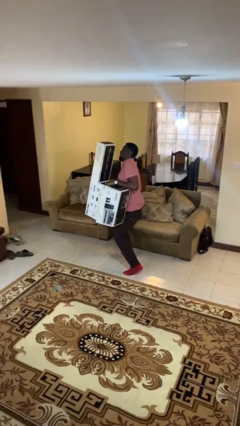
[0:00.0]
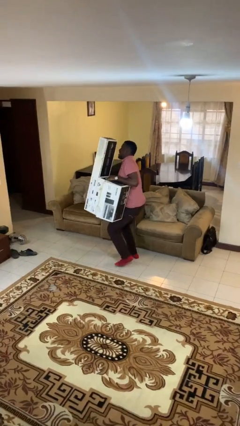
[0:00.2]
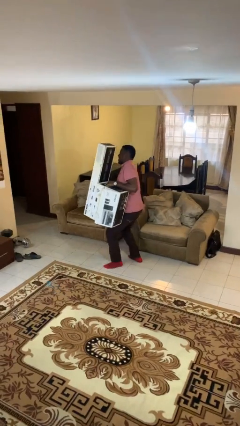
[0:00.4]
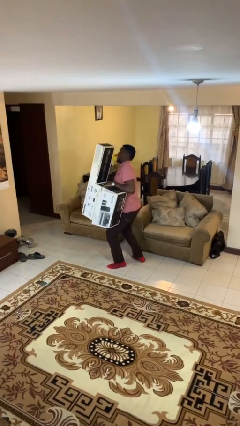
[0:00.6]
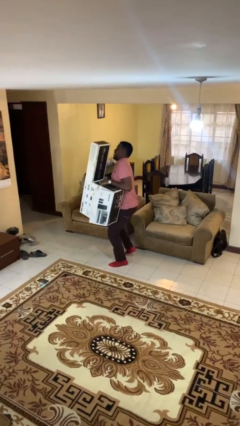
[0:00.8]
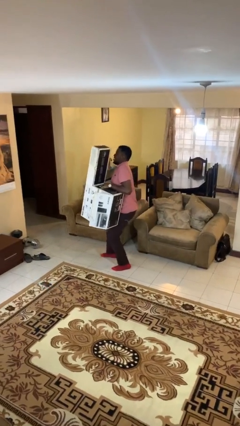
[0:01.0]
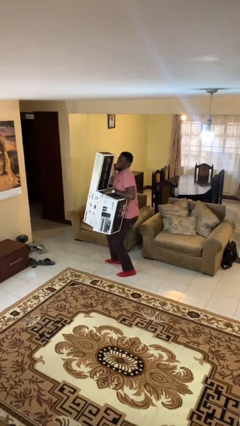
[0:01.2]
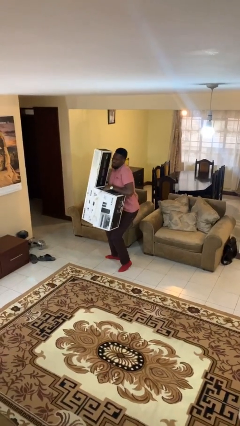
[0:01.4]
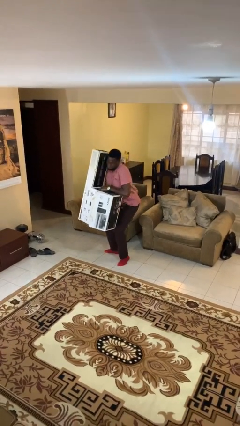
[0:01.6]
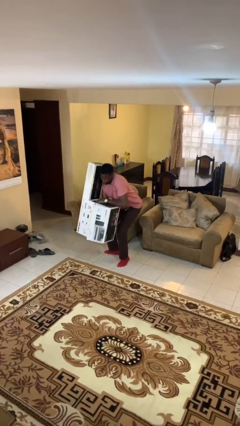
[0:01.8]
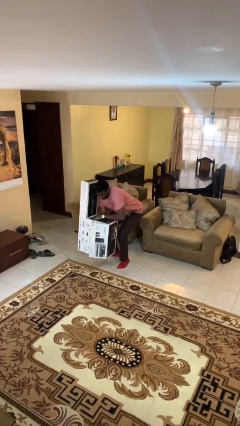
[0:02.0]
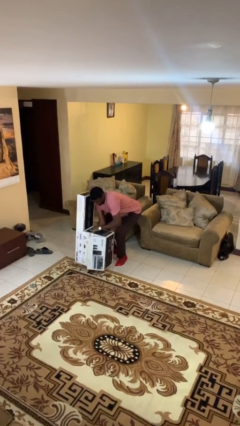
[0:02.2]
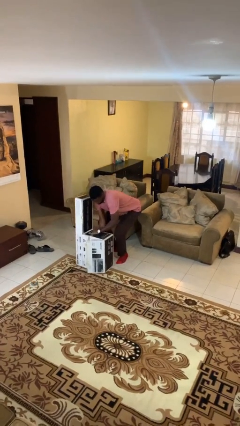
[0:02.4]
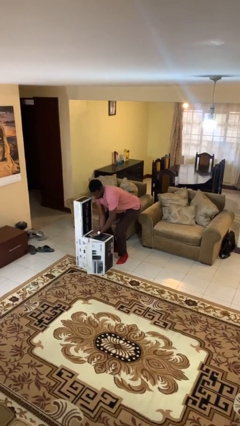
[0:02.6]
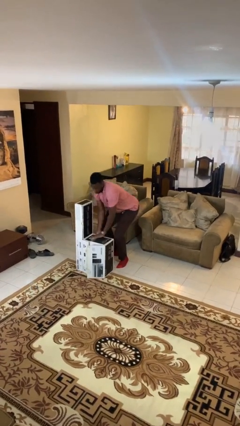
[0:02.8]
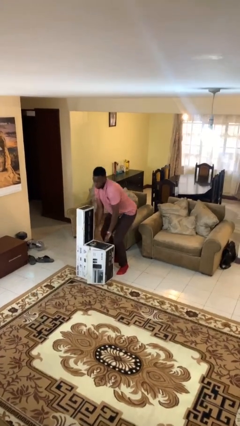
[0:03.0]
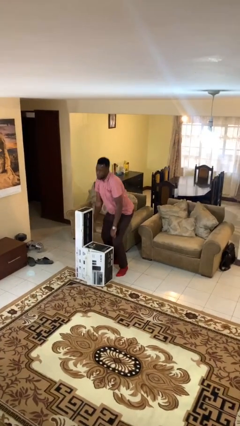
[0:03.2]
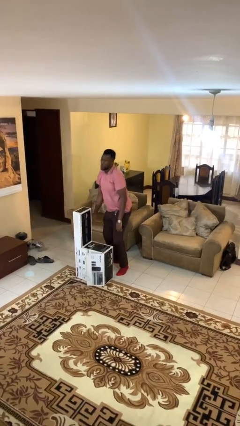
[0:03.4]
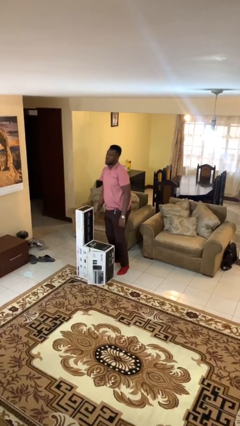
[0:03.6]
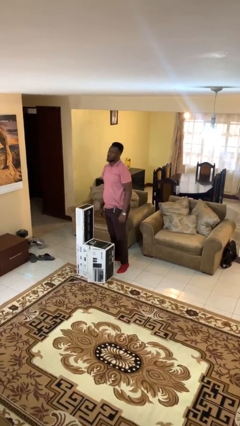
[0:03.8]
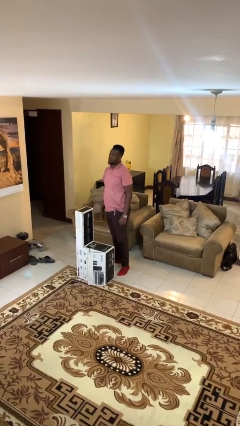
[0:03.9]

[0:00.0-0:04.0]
person puts down object on floor

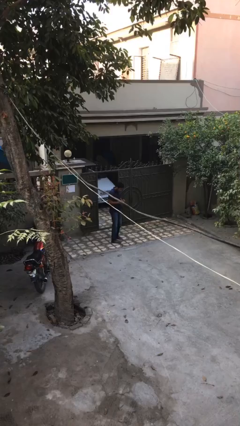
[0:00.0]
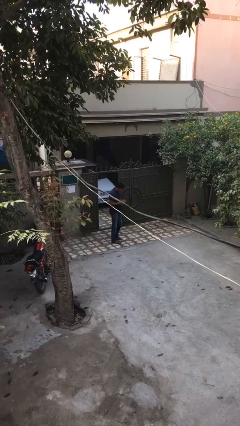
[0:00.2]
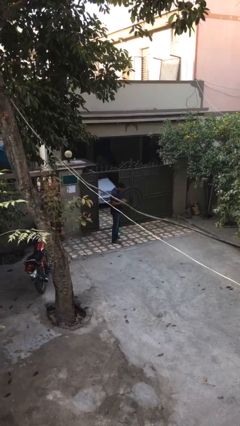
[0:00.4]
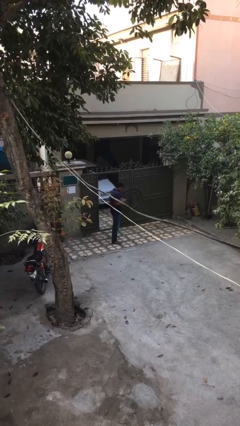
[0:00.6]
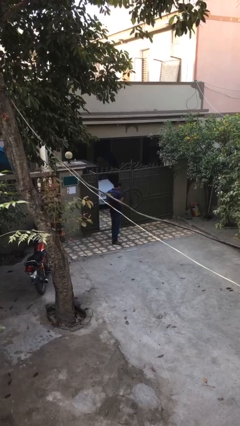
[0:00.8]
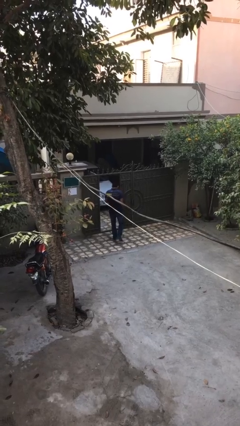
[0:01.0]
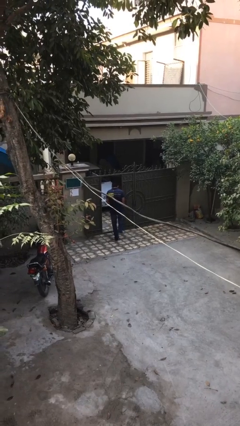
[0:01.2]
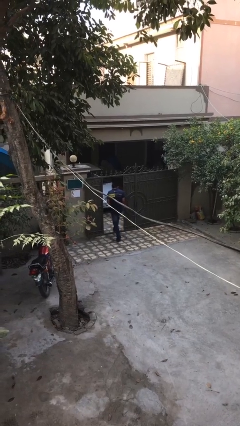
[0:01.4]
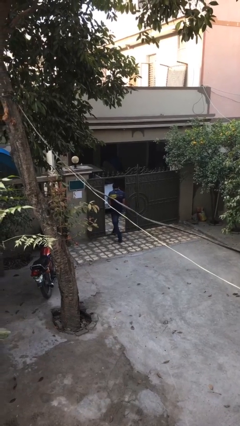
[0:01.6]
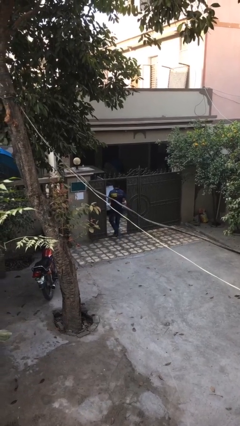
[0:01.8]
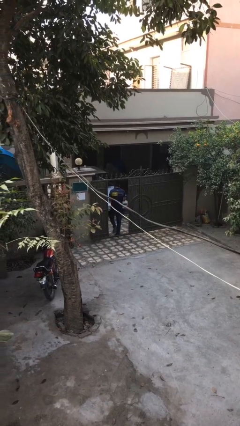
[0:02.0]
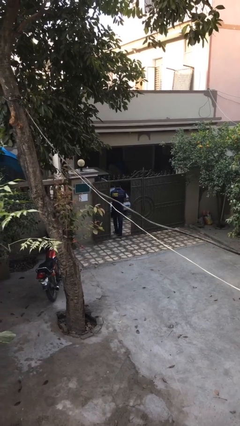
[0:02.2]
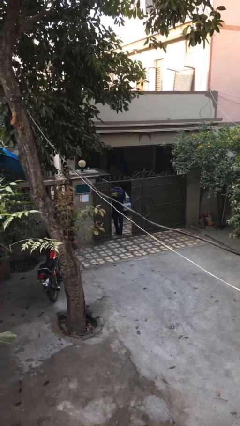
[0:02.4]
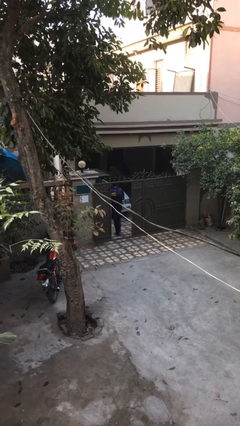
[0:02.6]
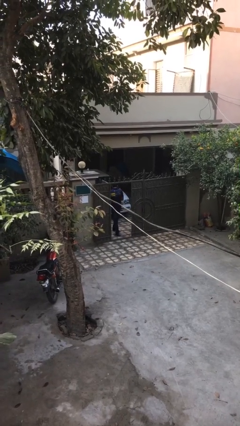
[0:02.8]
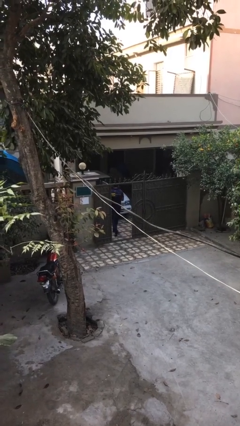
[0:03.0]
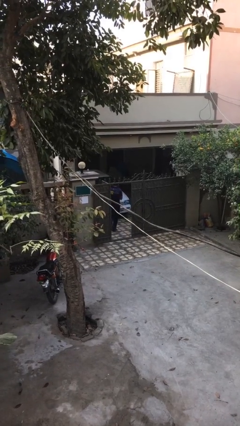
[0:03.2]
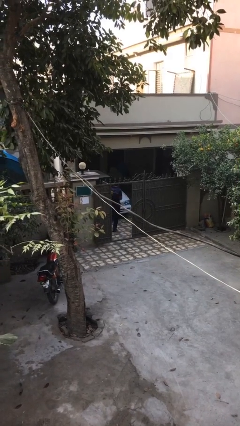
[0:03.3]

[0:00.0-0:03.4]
person exits scene through structure

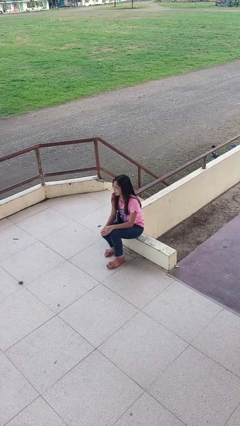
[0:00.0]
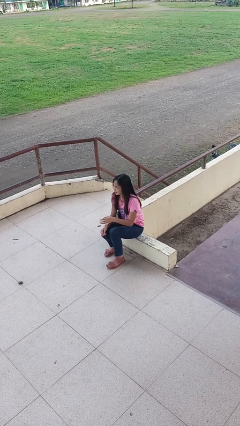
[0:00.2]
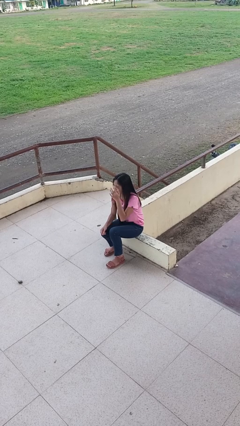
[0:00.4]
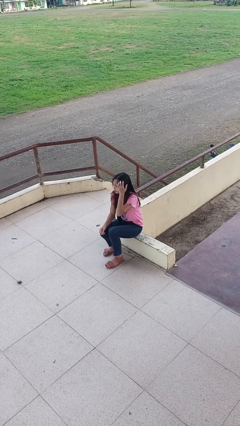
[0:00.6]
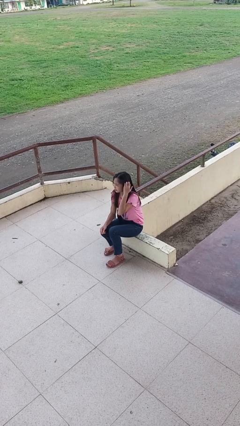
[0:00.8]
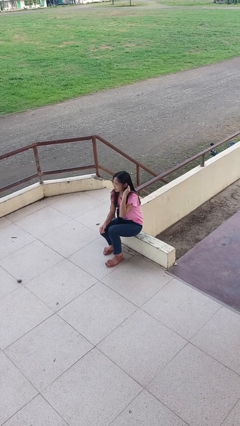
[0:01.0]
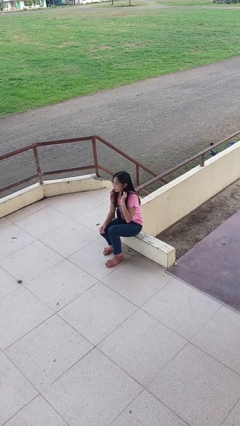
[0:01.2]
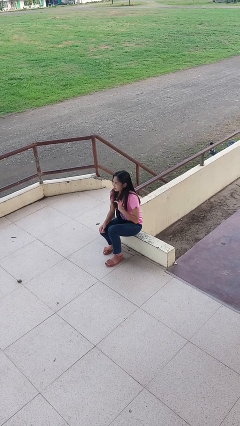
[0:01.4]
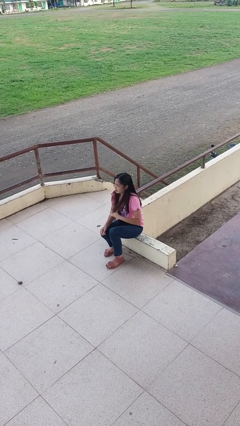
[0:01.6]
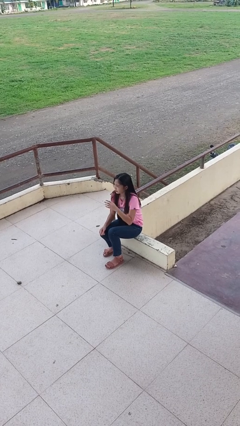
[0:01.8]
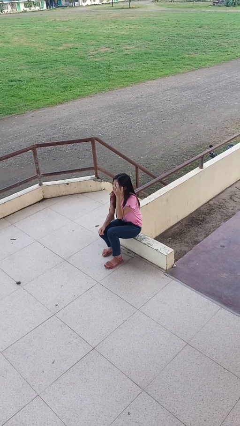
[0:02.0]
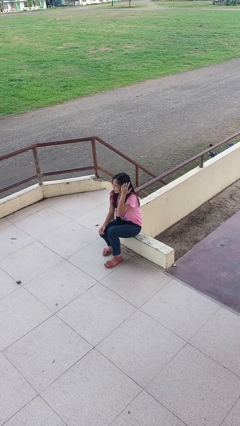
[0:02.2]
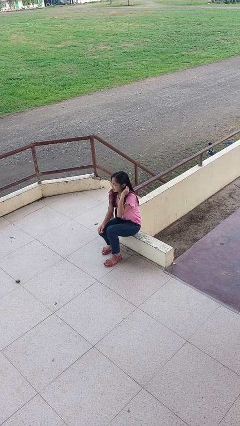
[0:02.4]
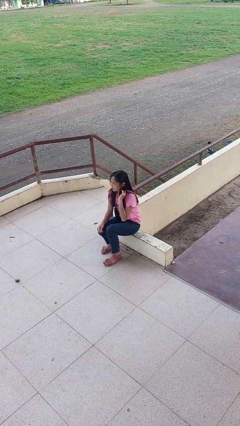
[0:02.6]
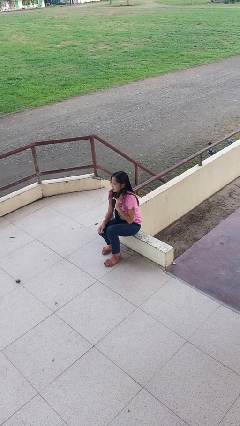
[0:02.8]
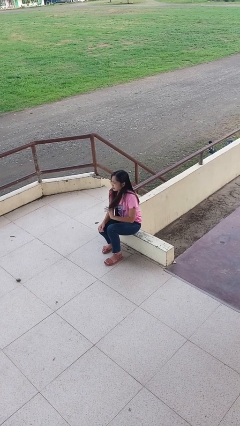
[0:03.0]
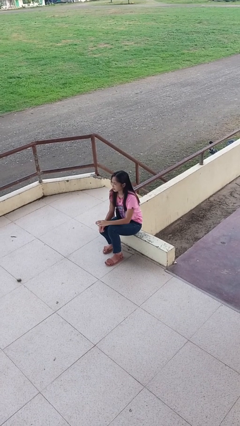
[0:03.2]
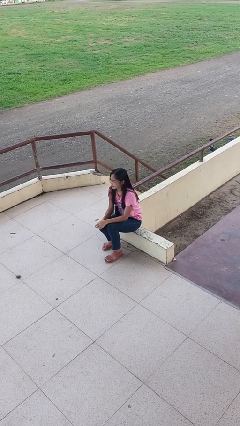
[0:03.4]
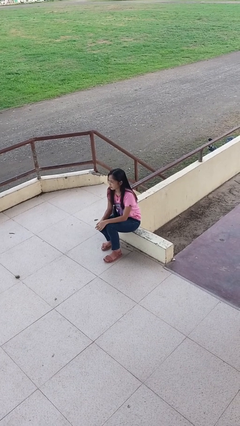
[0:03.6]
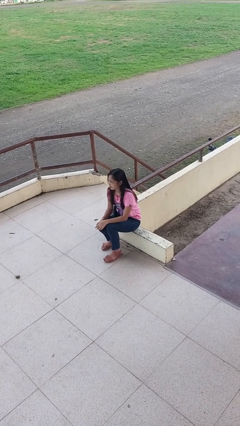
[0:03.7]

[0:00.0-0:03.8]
person strokes hair

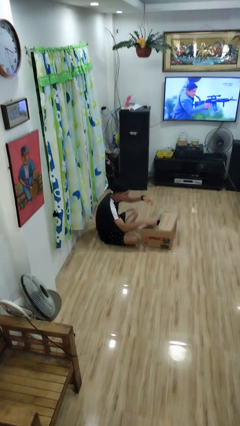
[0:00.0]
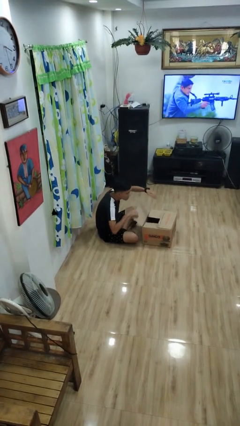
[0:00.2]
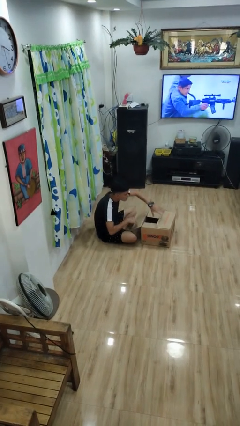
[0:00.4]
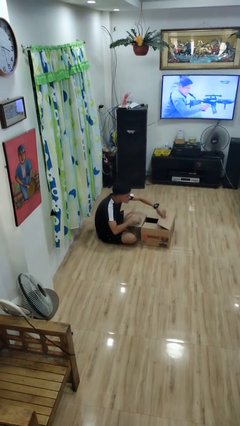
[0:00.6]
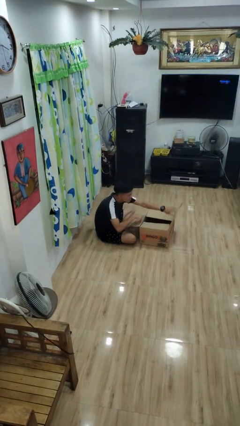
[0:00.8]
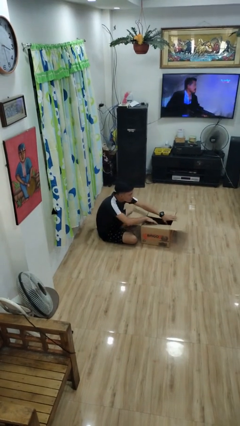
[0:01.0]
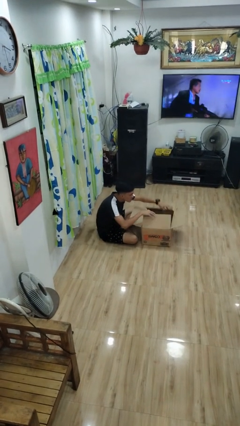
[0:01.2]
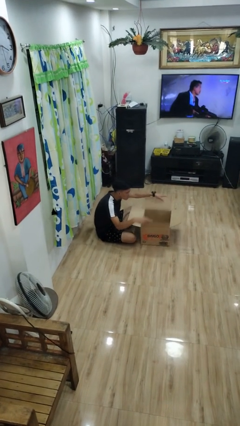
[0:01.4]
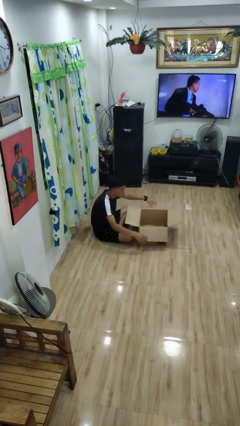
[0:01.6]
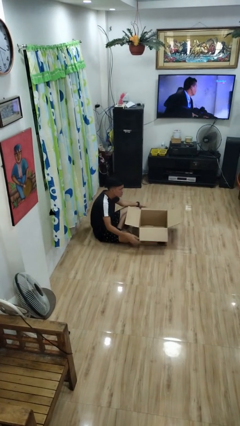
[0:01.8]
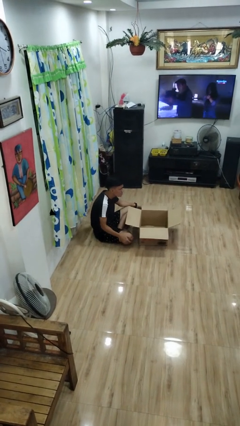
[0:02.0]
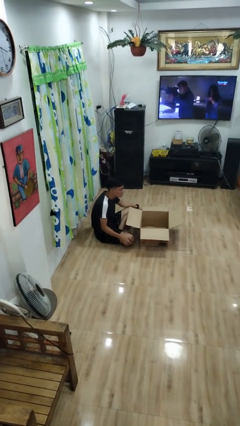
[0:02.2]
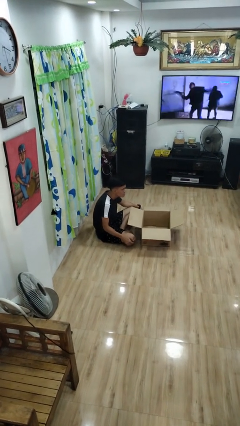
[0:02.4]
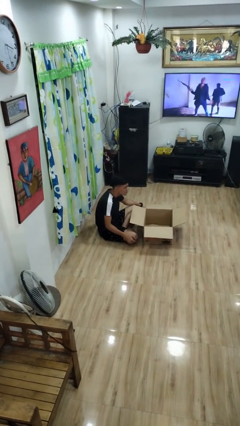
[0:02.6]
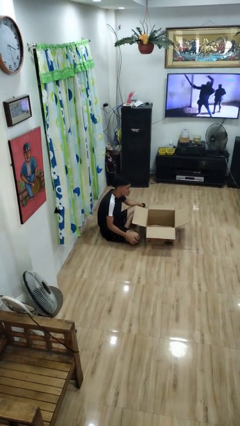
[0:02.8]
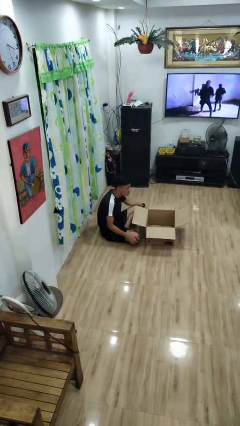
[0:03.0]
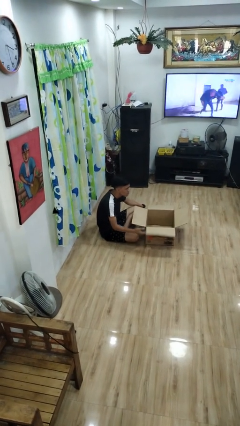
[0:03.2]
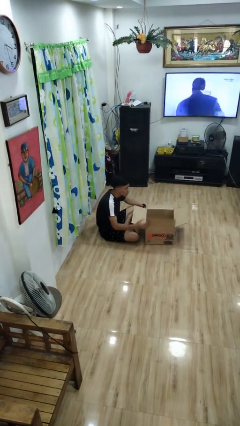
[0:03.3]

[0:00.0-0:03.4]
person opens box

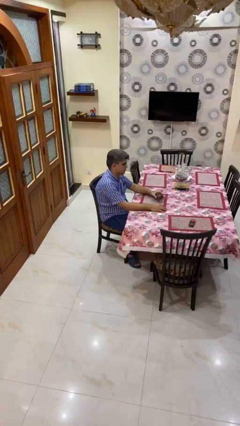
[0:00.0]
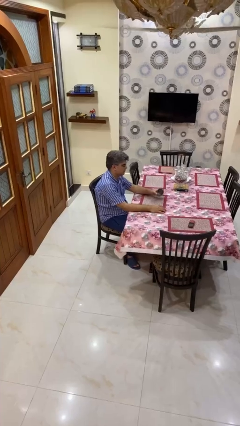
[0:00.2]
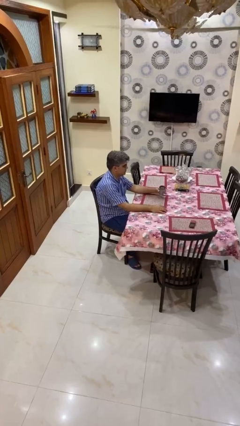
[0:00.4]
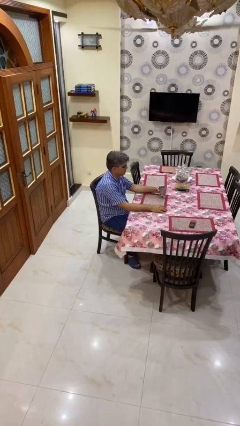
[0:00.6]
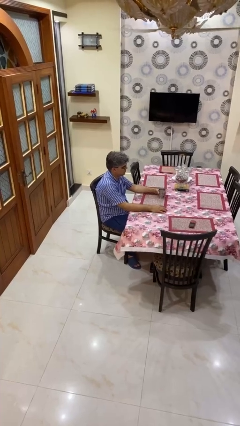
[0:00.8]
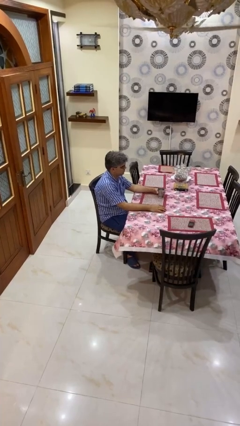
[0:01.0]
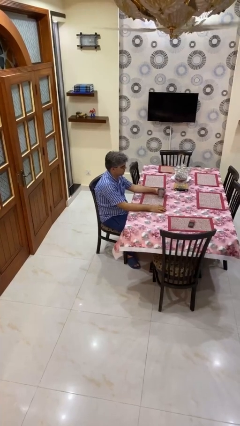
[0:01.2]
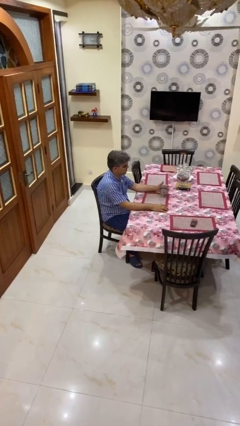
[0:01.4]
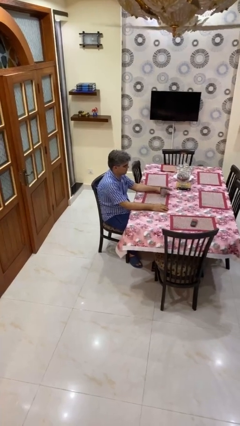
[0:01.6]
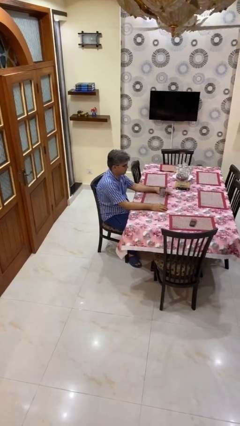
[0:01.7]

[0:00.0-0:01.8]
person sets upright glass

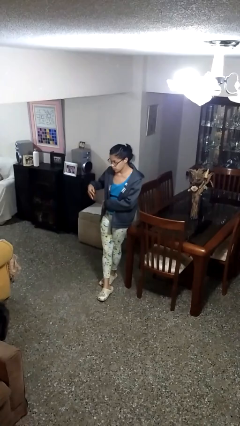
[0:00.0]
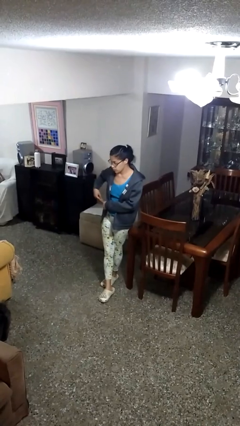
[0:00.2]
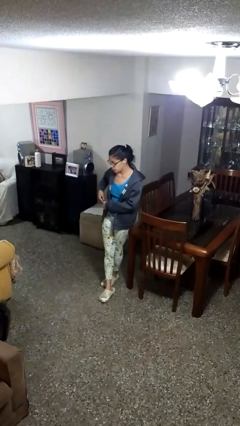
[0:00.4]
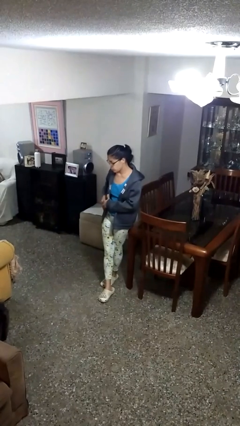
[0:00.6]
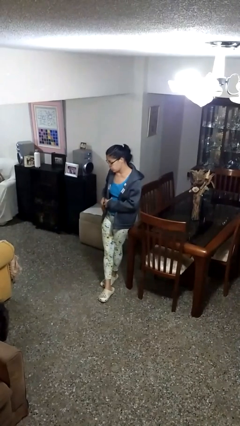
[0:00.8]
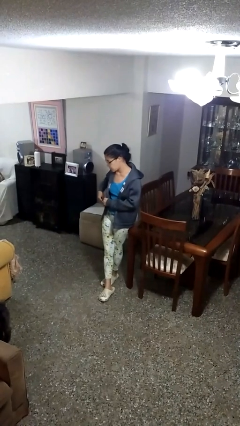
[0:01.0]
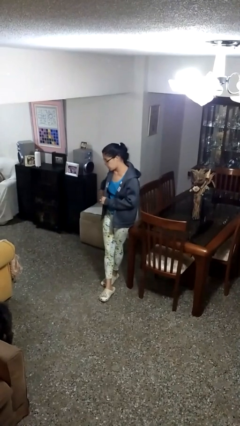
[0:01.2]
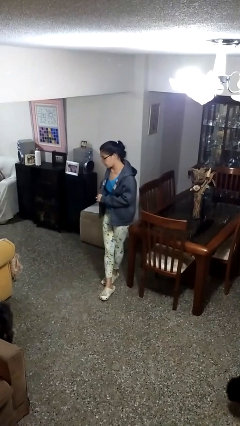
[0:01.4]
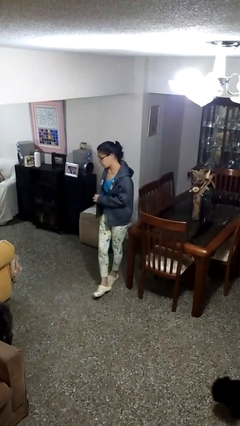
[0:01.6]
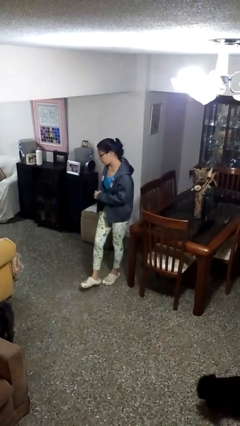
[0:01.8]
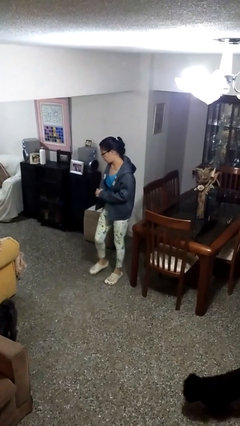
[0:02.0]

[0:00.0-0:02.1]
person puts phone into pocket
